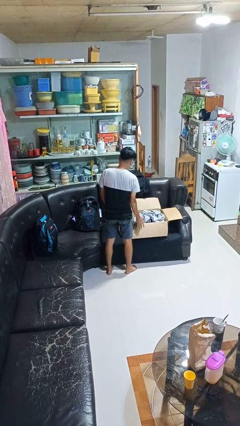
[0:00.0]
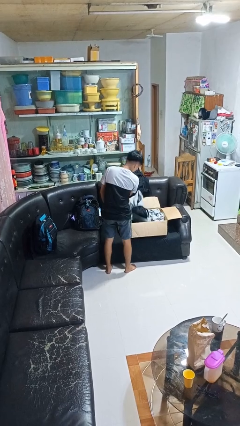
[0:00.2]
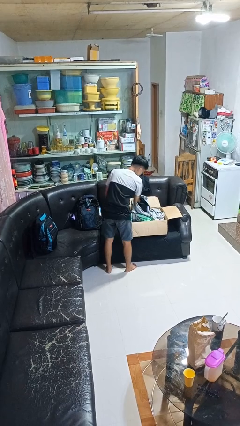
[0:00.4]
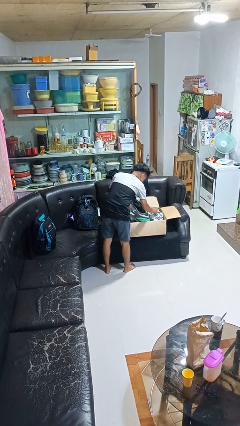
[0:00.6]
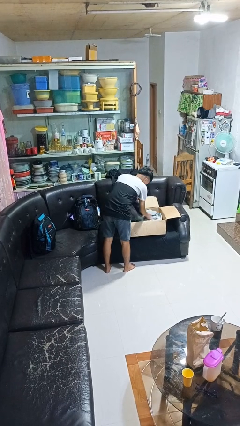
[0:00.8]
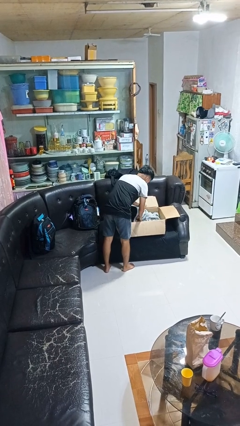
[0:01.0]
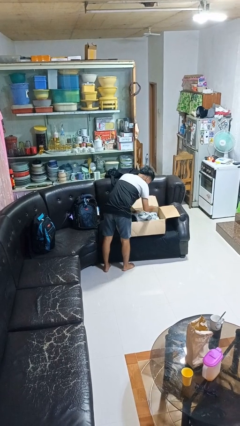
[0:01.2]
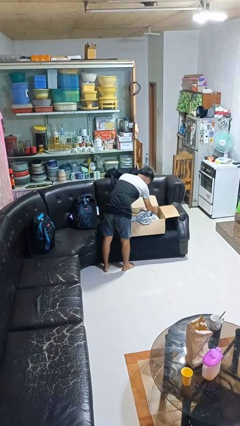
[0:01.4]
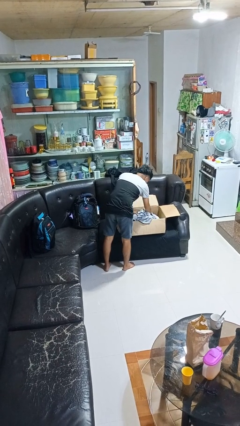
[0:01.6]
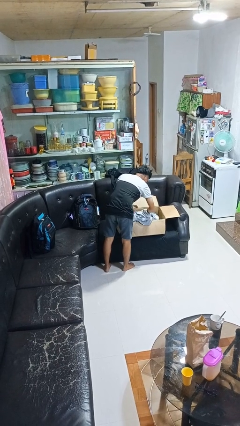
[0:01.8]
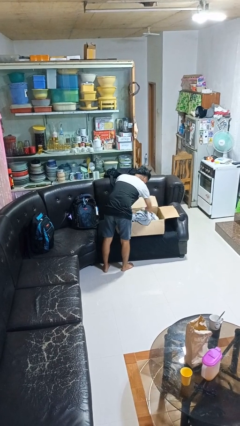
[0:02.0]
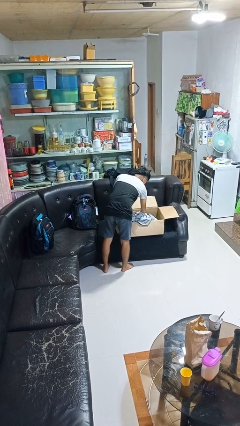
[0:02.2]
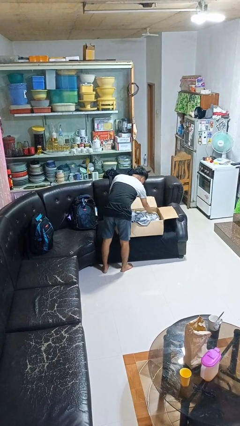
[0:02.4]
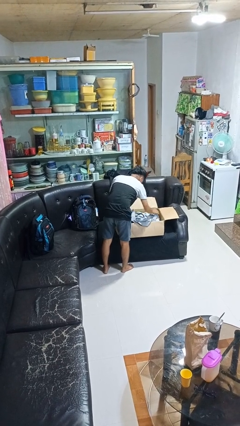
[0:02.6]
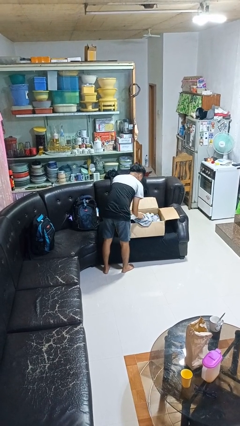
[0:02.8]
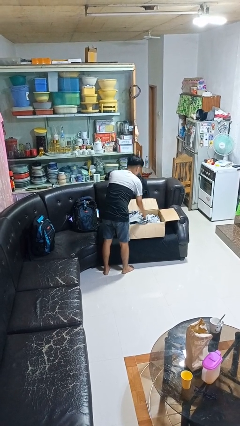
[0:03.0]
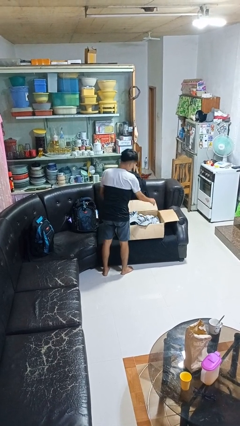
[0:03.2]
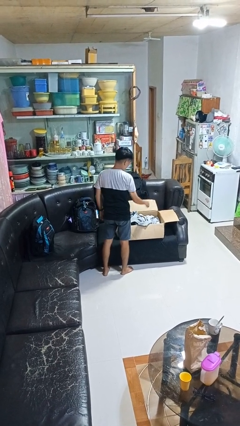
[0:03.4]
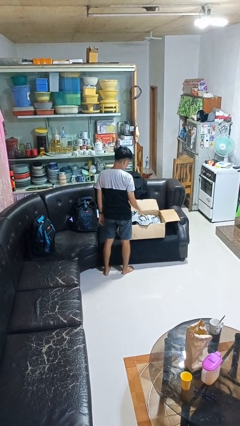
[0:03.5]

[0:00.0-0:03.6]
person searches in box

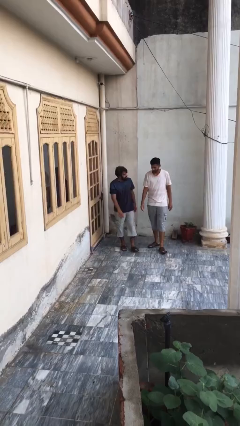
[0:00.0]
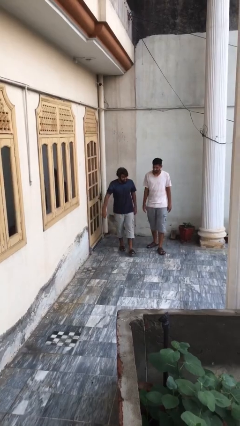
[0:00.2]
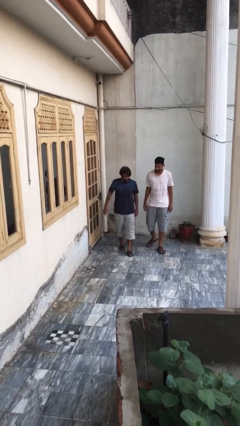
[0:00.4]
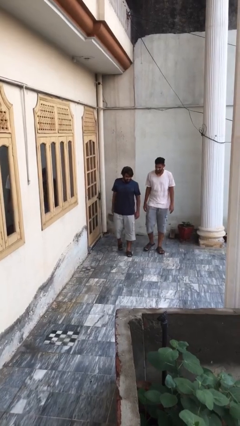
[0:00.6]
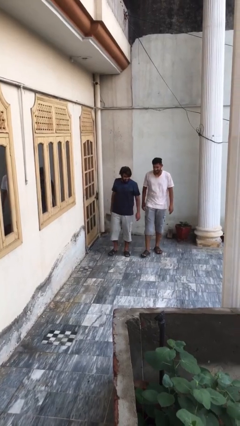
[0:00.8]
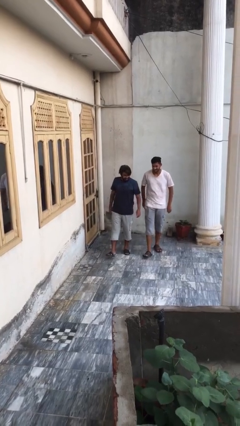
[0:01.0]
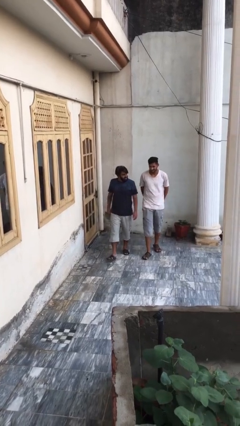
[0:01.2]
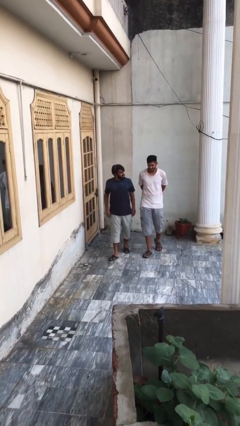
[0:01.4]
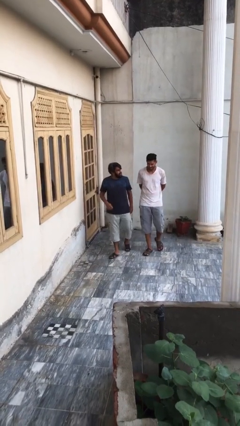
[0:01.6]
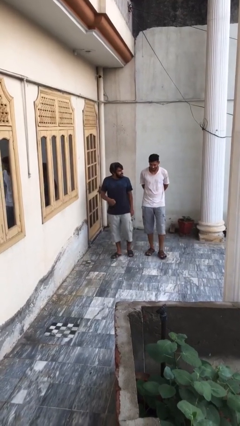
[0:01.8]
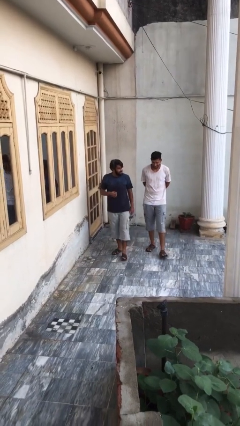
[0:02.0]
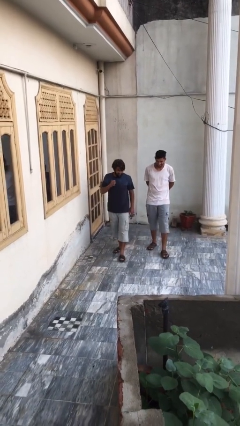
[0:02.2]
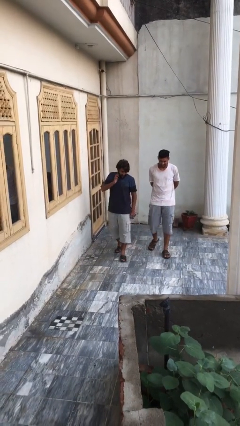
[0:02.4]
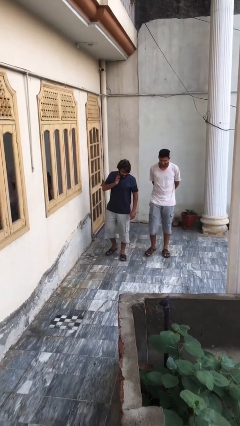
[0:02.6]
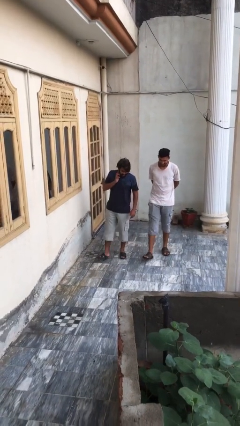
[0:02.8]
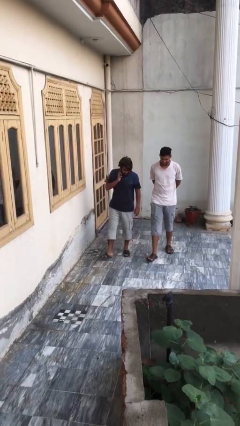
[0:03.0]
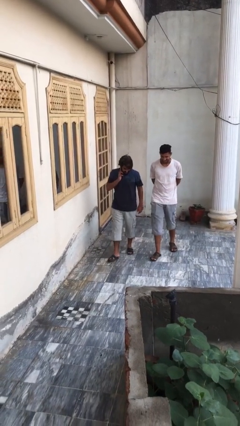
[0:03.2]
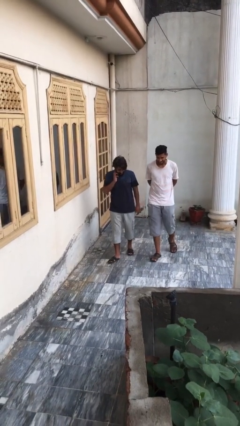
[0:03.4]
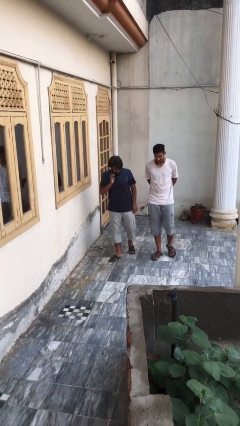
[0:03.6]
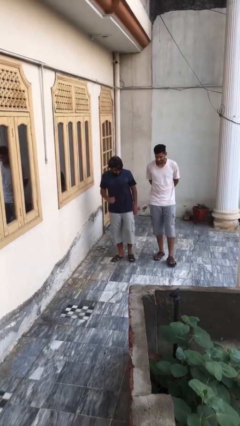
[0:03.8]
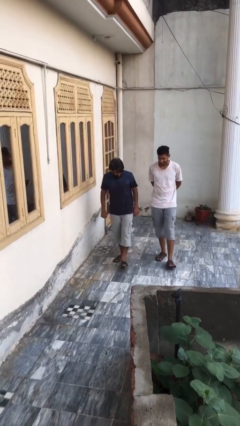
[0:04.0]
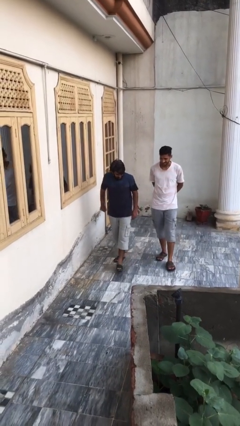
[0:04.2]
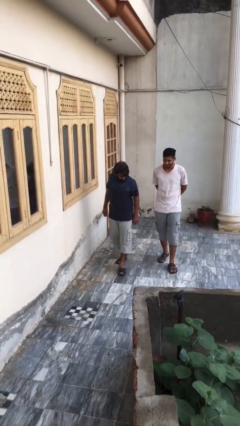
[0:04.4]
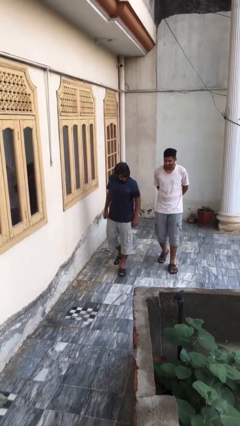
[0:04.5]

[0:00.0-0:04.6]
person talks to person

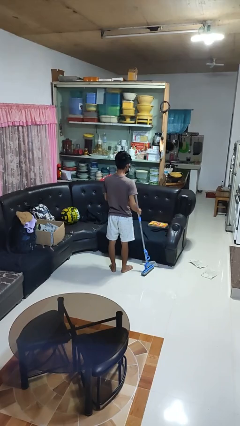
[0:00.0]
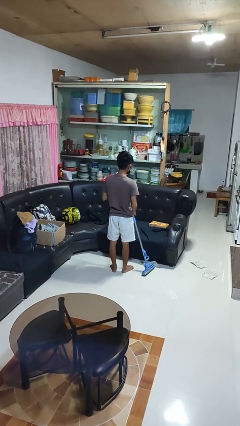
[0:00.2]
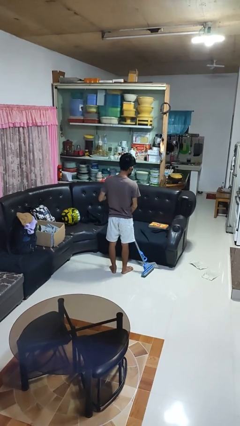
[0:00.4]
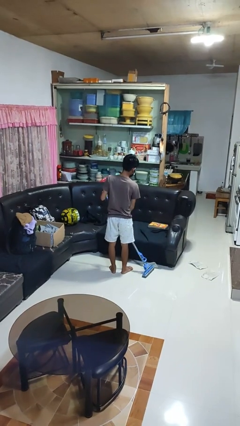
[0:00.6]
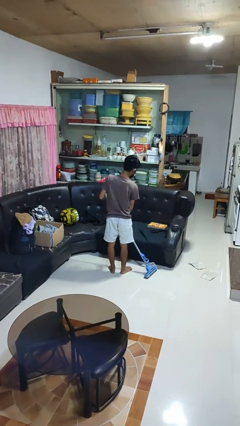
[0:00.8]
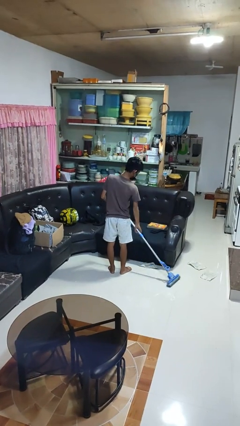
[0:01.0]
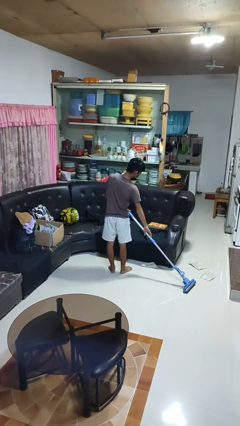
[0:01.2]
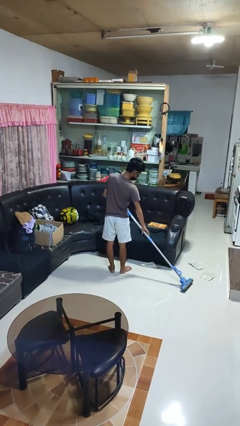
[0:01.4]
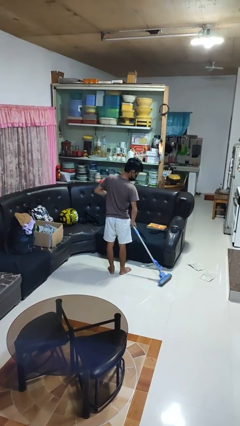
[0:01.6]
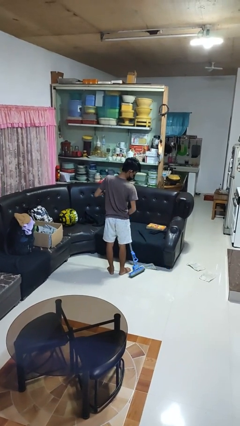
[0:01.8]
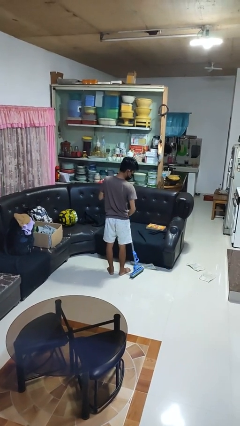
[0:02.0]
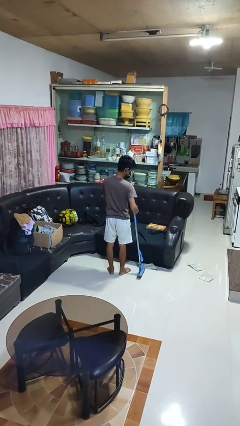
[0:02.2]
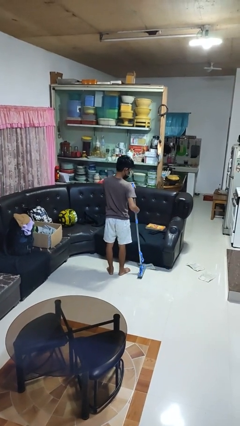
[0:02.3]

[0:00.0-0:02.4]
person mops

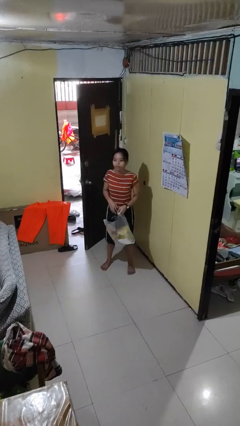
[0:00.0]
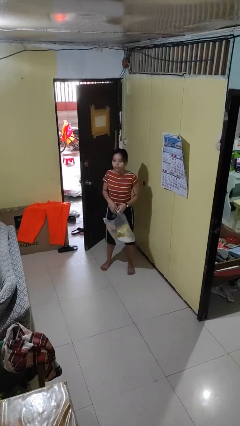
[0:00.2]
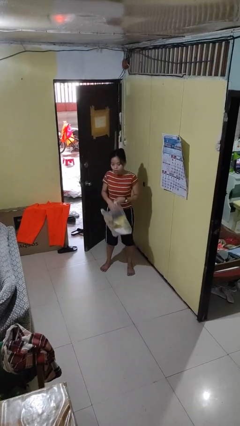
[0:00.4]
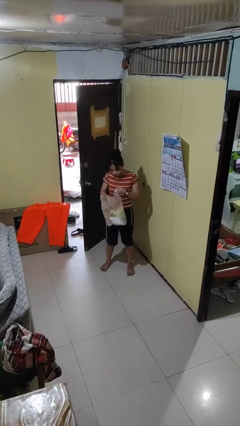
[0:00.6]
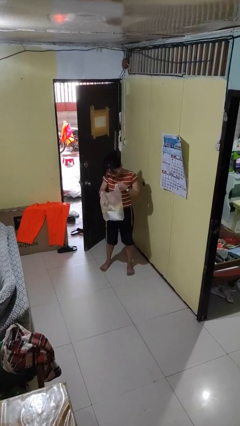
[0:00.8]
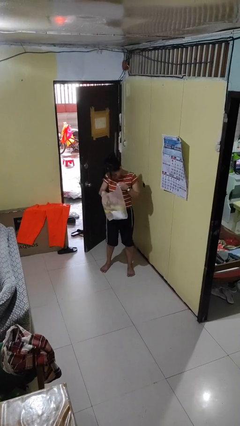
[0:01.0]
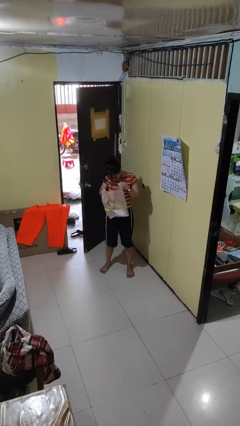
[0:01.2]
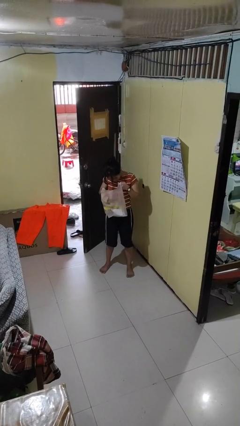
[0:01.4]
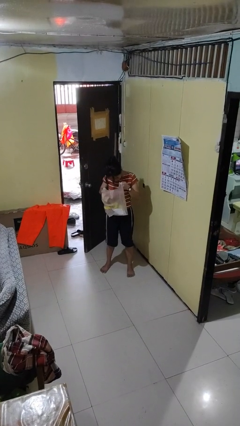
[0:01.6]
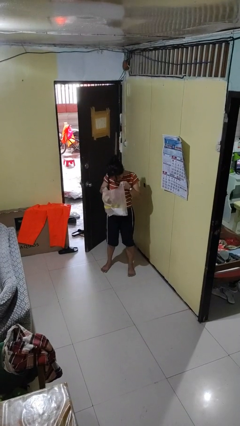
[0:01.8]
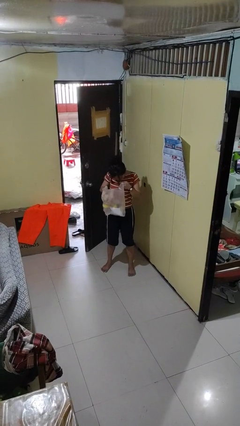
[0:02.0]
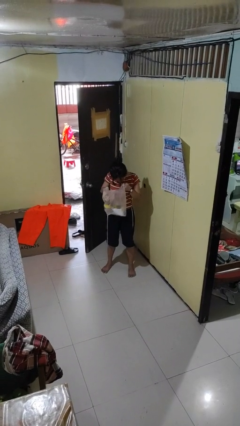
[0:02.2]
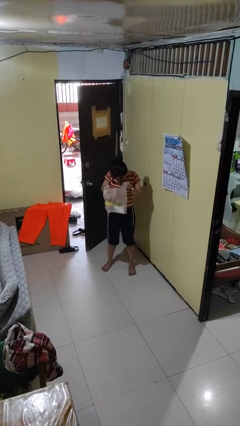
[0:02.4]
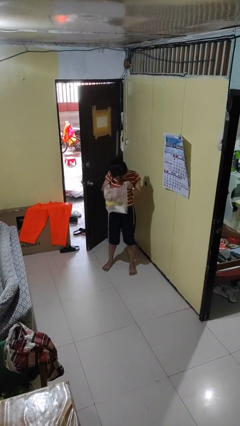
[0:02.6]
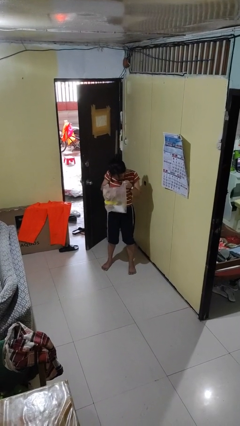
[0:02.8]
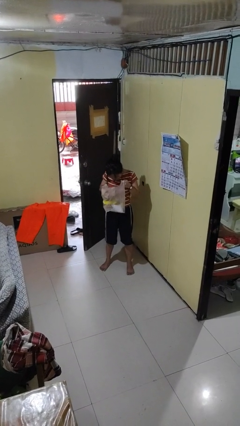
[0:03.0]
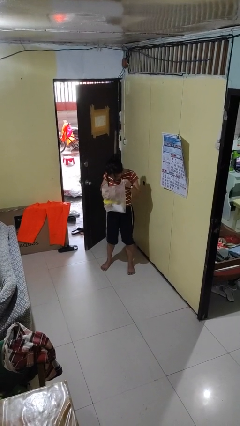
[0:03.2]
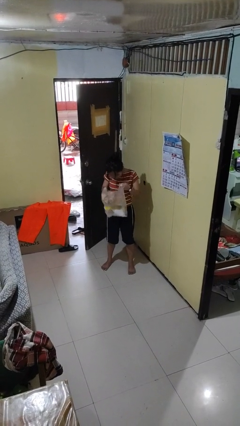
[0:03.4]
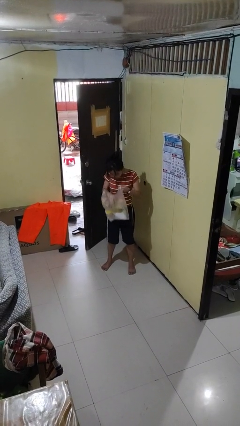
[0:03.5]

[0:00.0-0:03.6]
person searches in bag

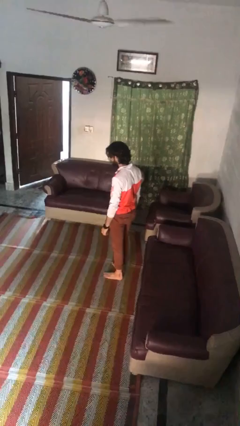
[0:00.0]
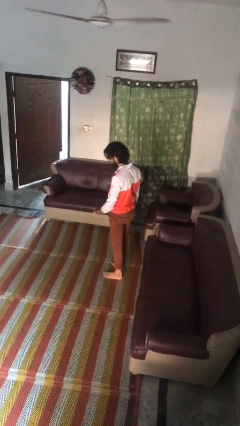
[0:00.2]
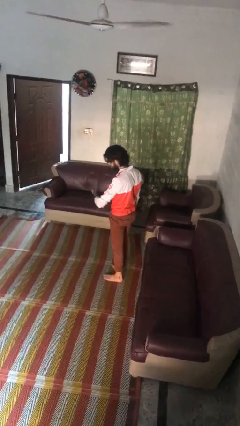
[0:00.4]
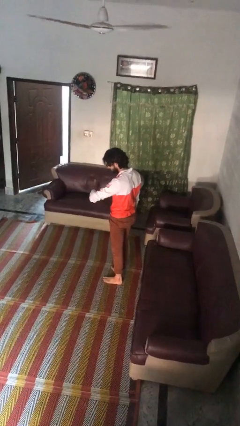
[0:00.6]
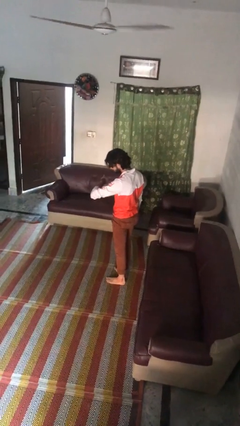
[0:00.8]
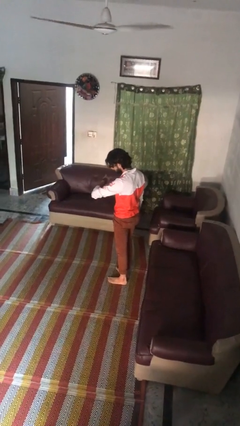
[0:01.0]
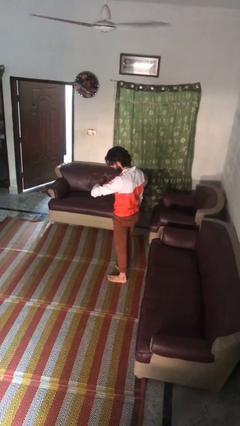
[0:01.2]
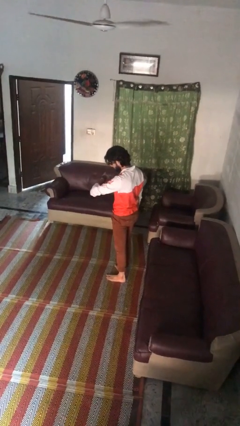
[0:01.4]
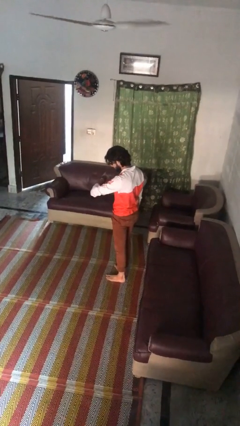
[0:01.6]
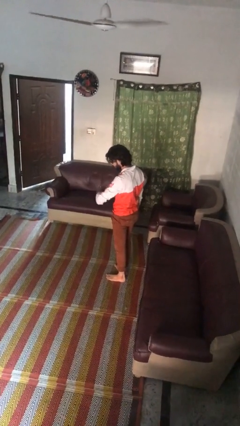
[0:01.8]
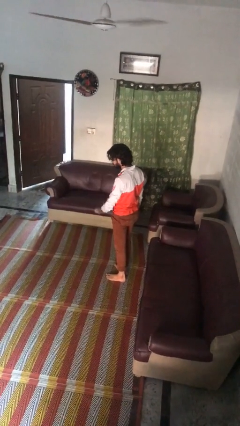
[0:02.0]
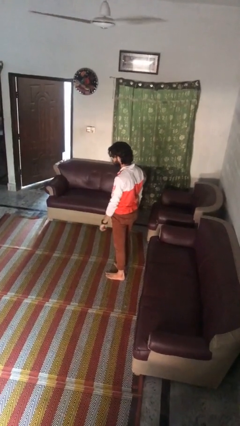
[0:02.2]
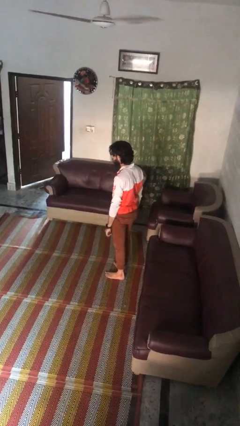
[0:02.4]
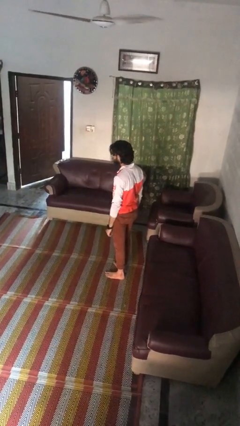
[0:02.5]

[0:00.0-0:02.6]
person looks at wristwatch
